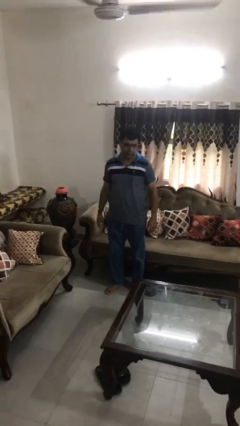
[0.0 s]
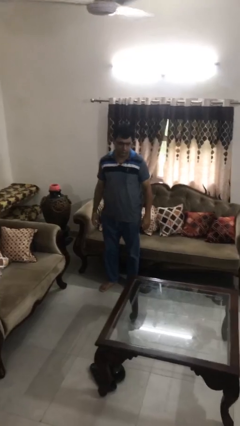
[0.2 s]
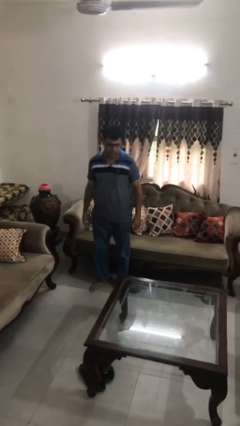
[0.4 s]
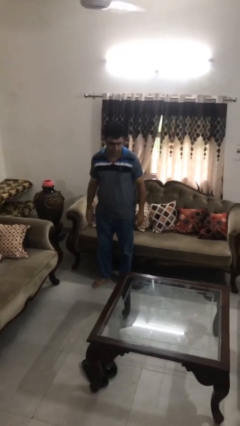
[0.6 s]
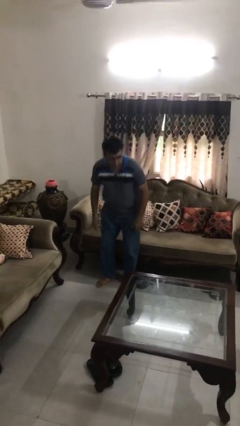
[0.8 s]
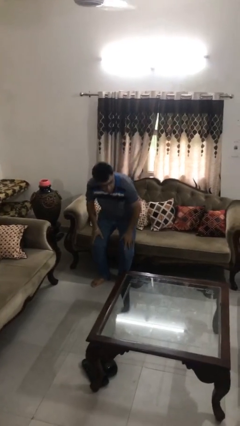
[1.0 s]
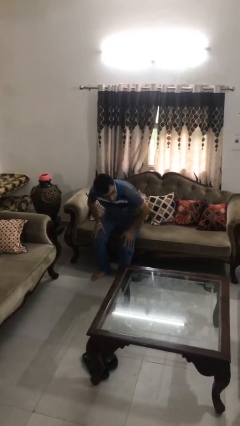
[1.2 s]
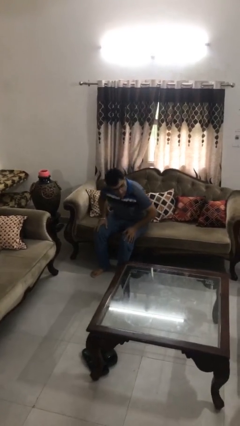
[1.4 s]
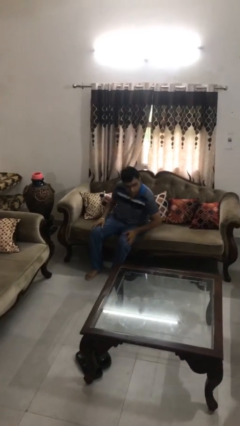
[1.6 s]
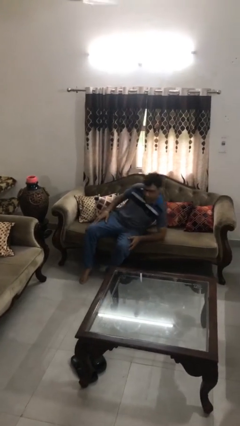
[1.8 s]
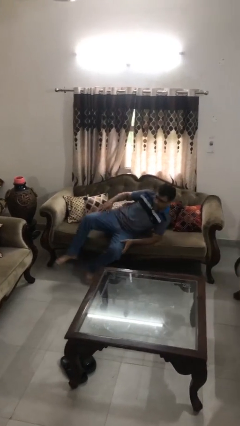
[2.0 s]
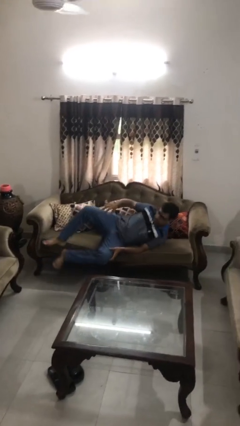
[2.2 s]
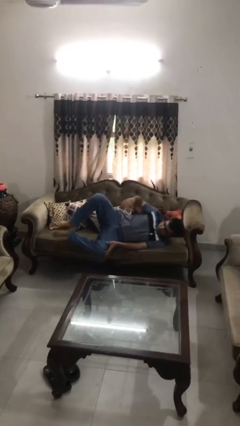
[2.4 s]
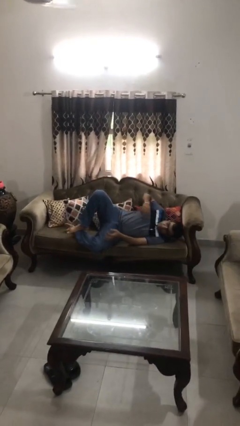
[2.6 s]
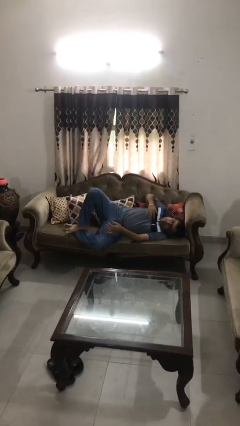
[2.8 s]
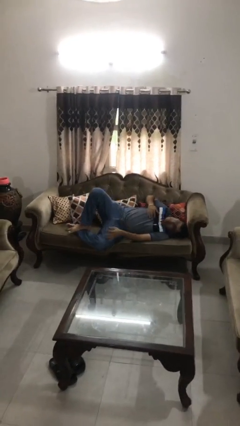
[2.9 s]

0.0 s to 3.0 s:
person lies down on couch

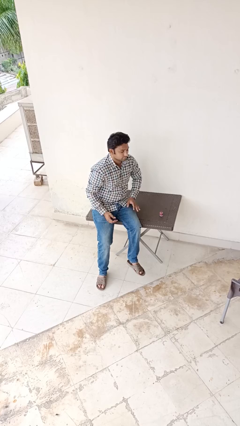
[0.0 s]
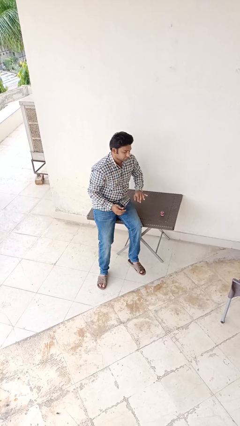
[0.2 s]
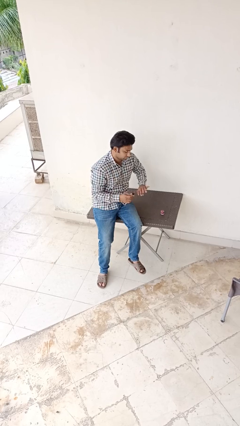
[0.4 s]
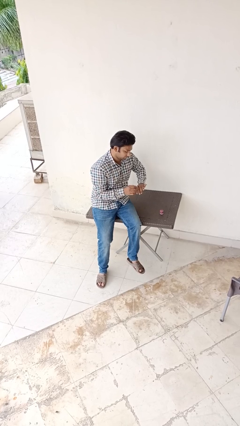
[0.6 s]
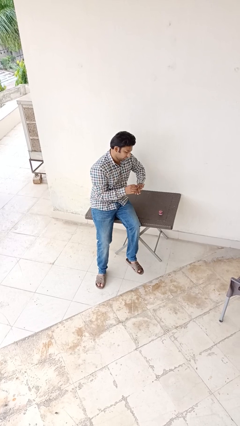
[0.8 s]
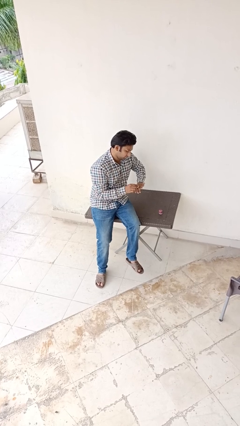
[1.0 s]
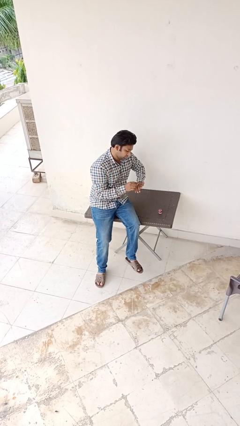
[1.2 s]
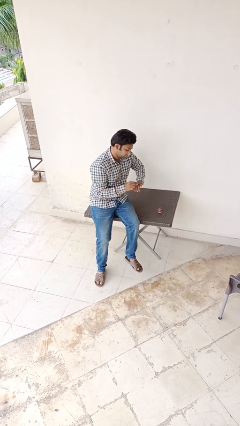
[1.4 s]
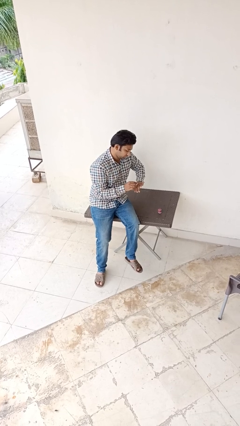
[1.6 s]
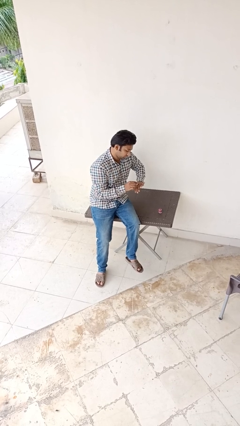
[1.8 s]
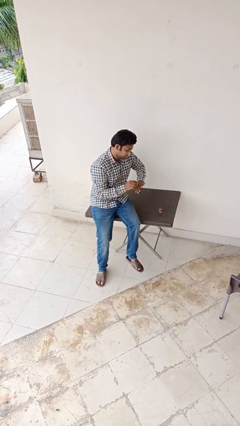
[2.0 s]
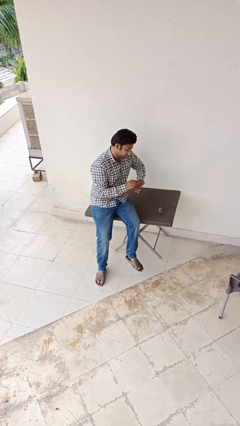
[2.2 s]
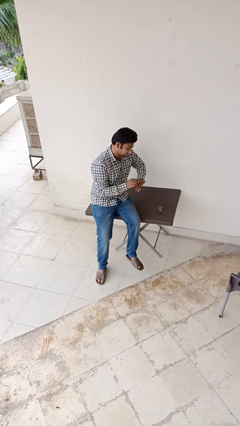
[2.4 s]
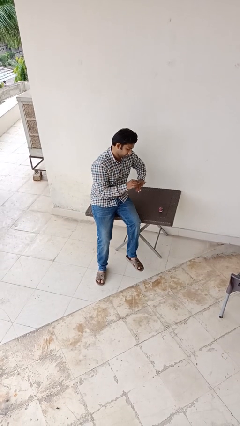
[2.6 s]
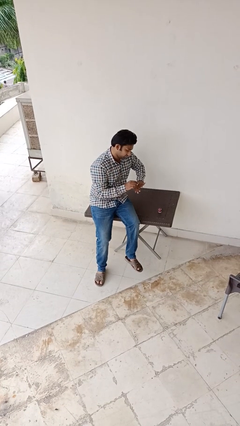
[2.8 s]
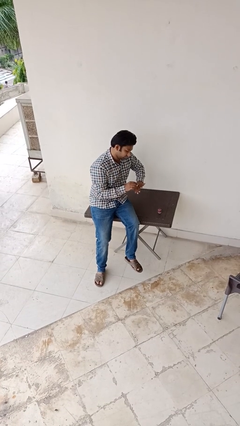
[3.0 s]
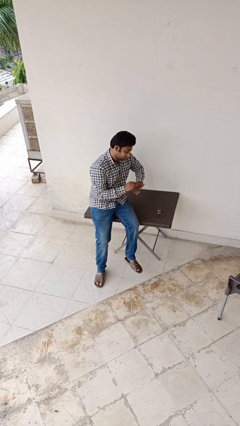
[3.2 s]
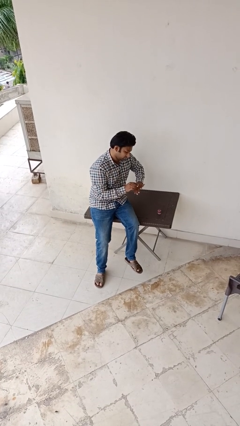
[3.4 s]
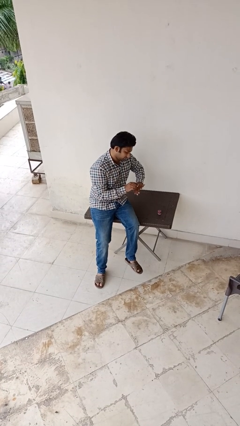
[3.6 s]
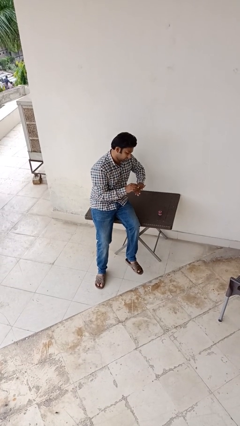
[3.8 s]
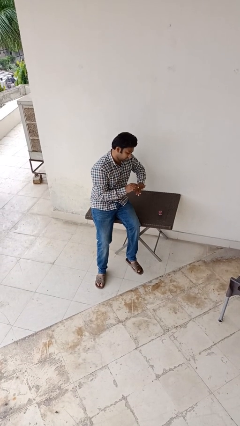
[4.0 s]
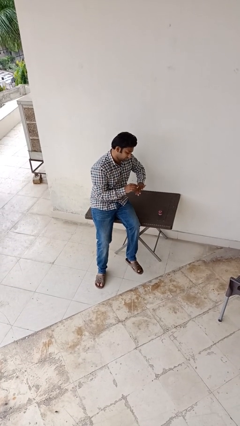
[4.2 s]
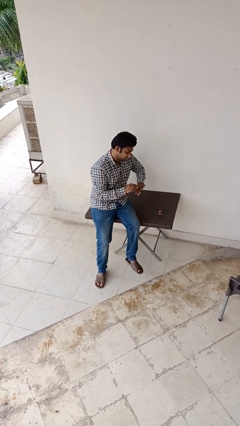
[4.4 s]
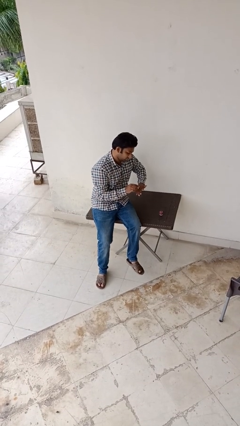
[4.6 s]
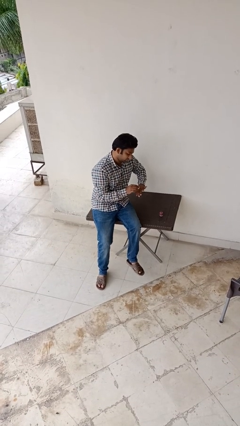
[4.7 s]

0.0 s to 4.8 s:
person paints fingernails

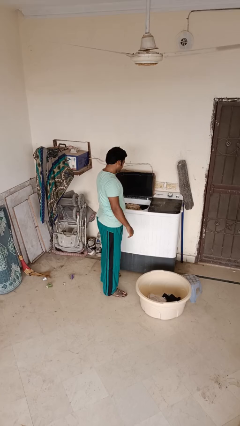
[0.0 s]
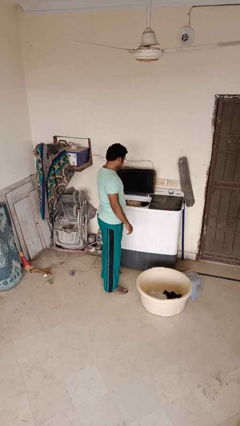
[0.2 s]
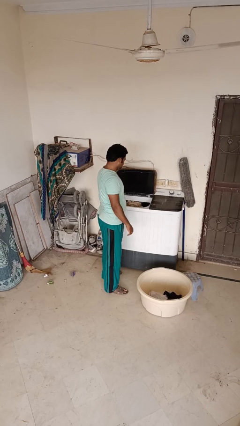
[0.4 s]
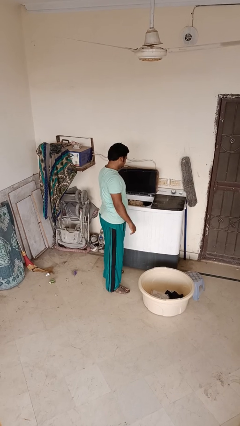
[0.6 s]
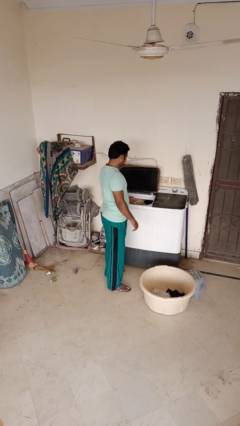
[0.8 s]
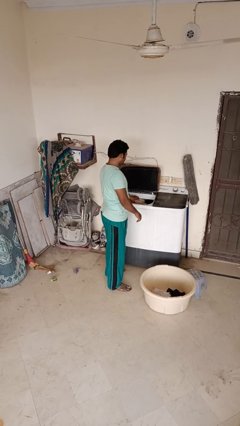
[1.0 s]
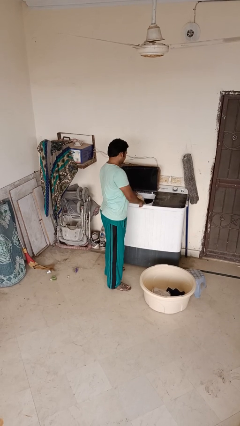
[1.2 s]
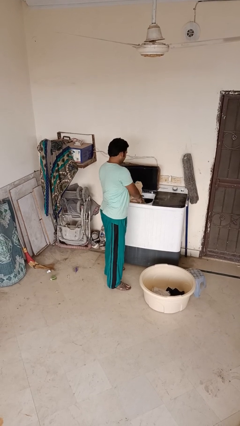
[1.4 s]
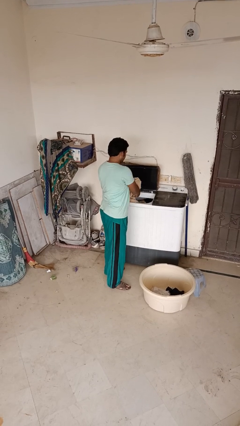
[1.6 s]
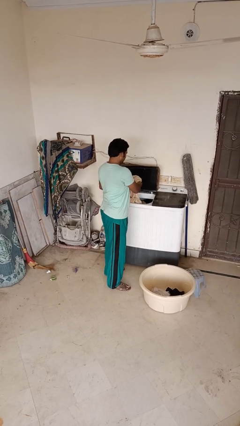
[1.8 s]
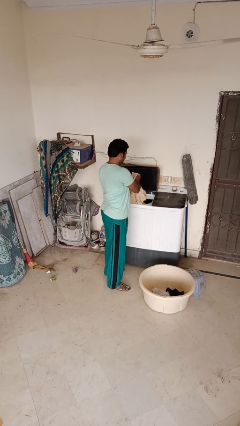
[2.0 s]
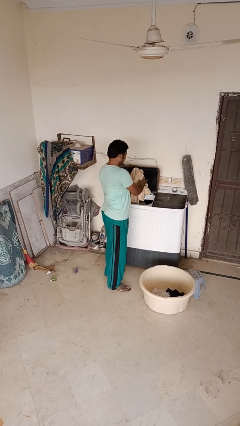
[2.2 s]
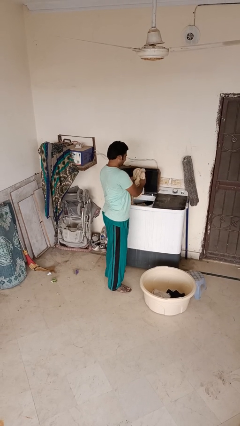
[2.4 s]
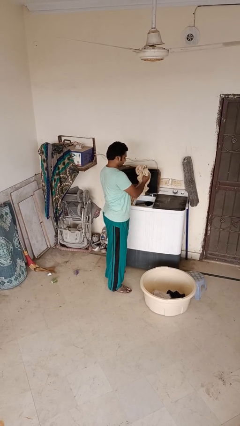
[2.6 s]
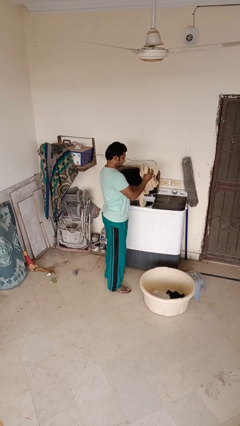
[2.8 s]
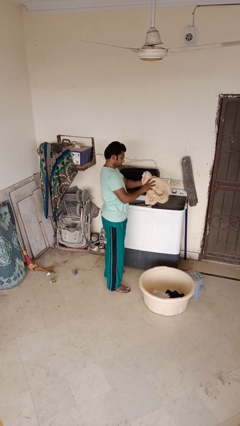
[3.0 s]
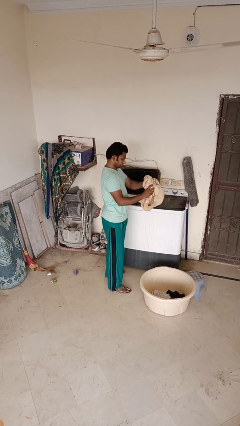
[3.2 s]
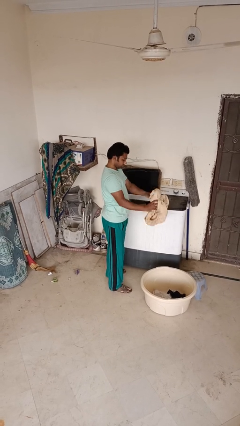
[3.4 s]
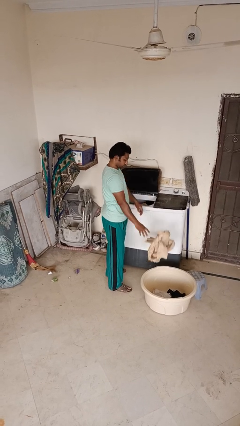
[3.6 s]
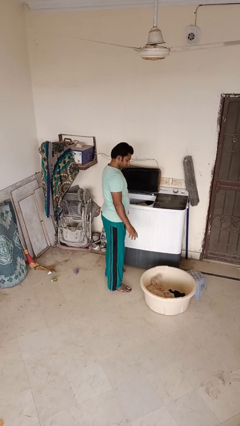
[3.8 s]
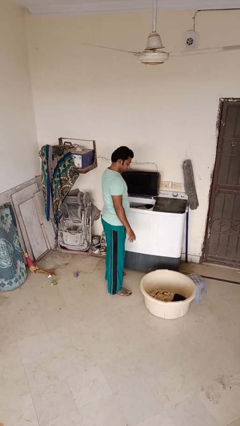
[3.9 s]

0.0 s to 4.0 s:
person loads clotheswasher

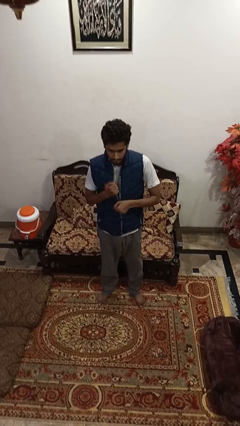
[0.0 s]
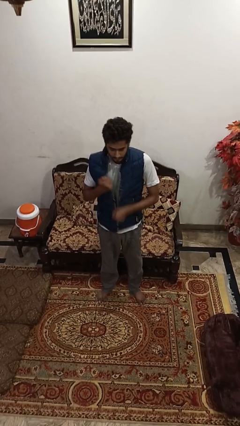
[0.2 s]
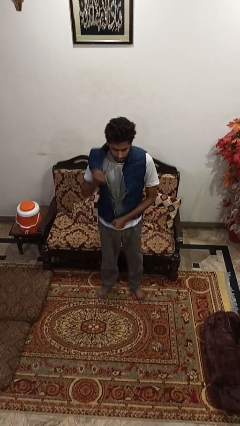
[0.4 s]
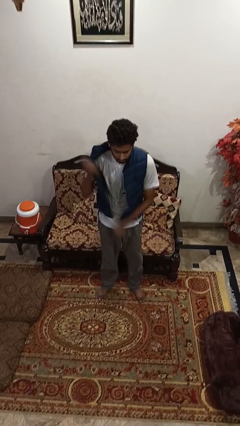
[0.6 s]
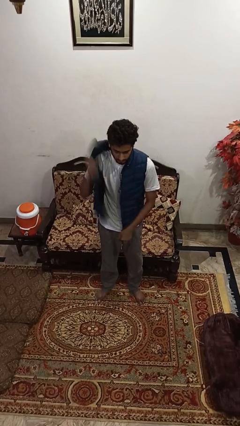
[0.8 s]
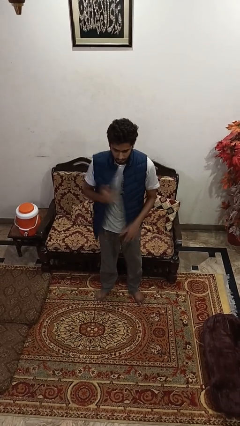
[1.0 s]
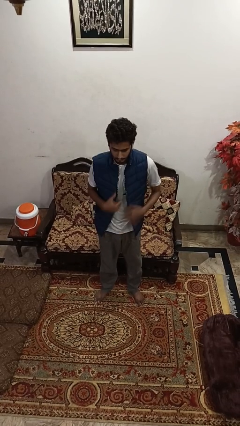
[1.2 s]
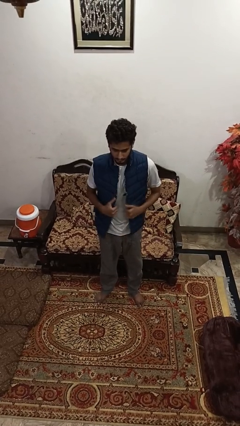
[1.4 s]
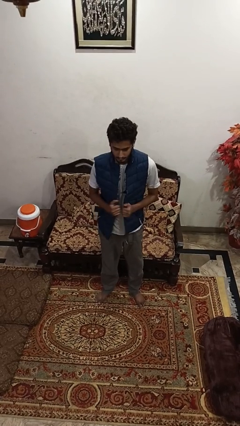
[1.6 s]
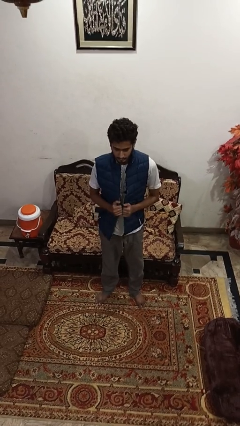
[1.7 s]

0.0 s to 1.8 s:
person unzips jacket

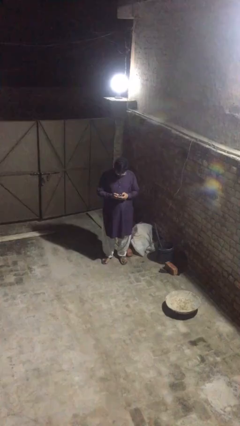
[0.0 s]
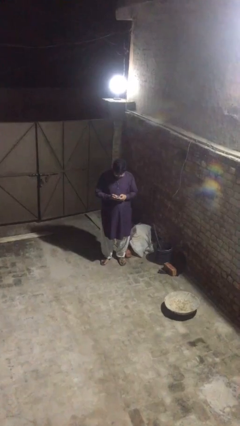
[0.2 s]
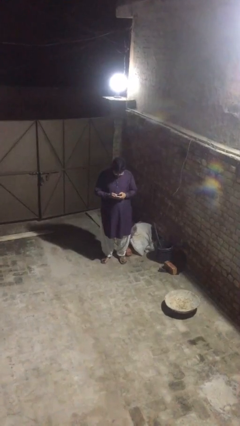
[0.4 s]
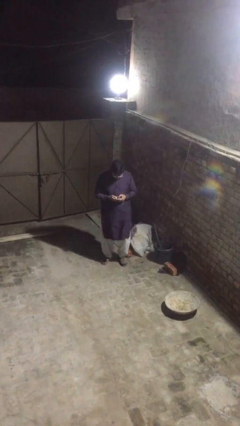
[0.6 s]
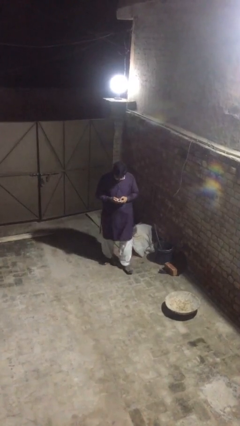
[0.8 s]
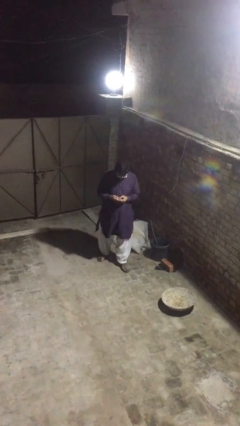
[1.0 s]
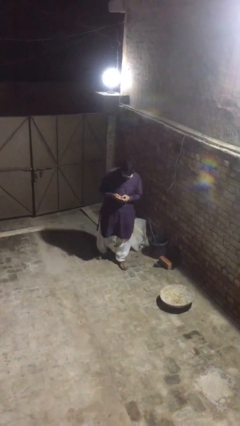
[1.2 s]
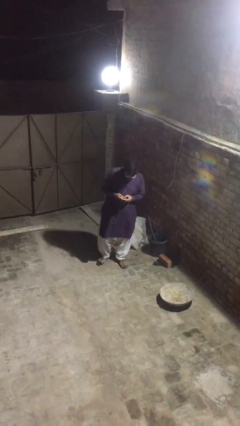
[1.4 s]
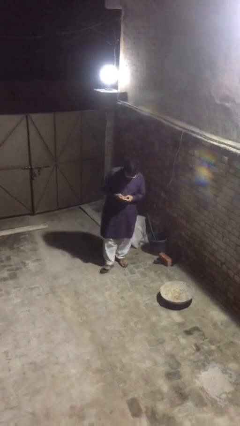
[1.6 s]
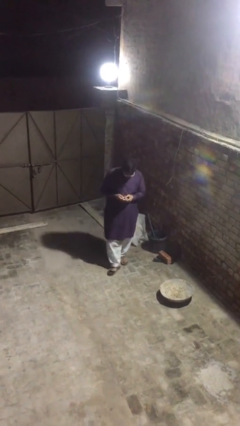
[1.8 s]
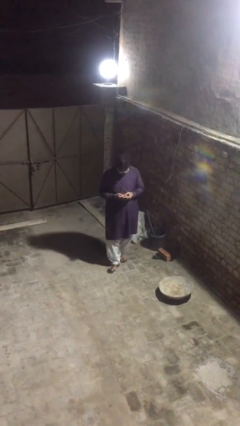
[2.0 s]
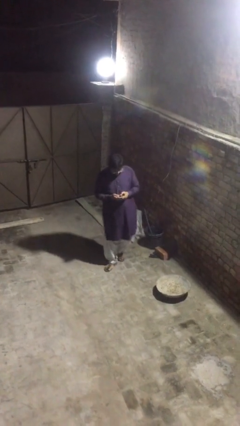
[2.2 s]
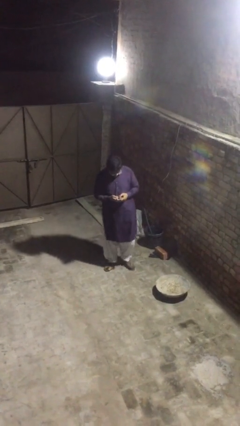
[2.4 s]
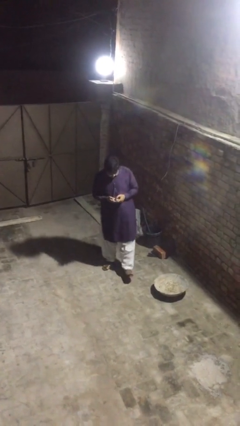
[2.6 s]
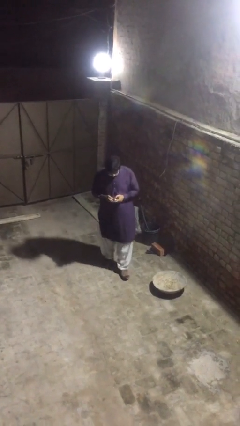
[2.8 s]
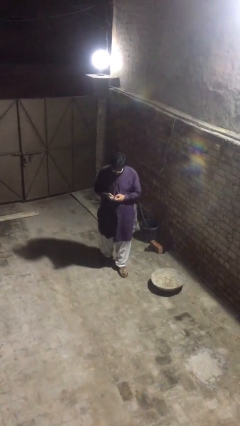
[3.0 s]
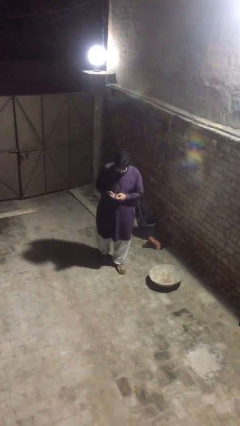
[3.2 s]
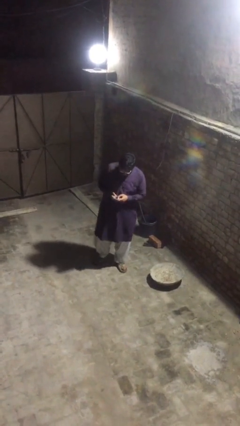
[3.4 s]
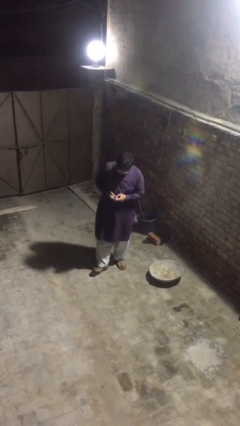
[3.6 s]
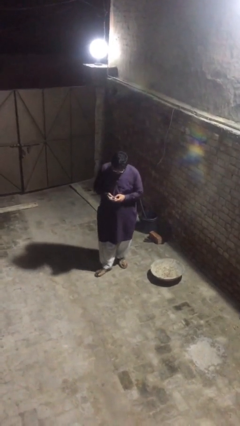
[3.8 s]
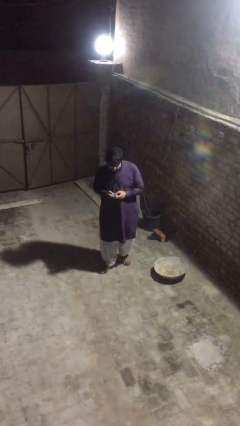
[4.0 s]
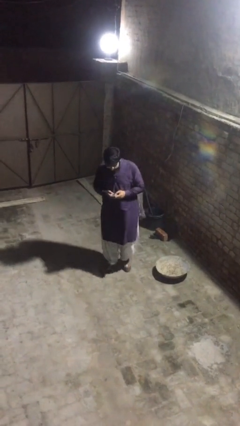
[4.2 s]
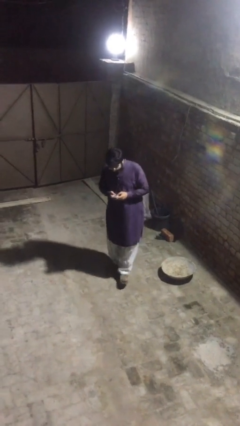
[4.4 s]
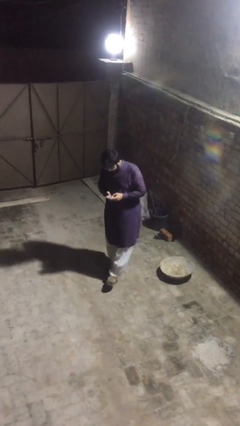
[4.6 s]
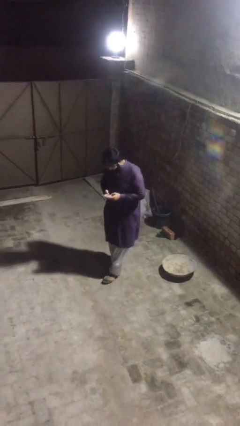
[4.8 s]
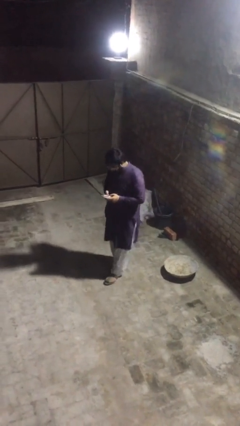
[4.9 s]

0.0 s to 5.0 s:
person texts on phone
